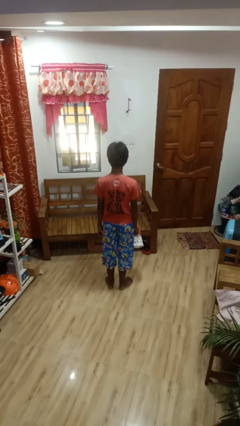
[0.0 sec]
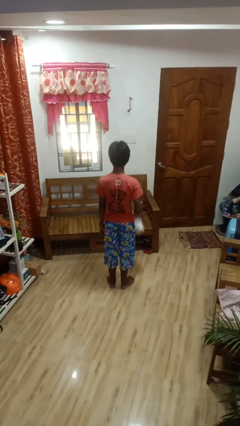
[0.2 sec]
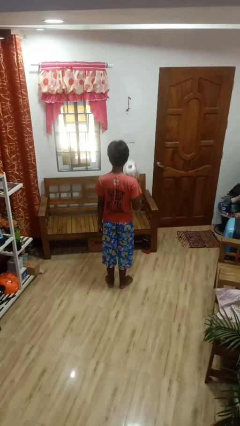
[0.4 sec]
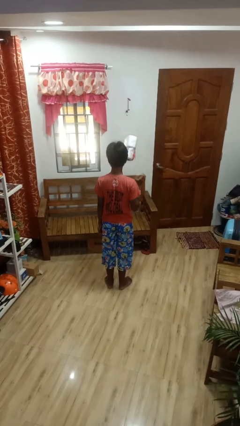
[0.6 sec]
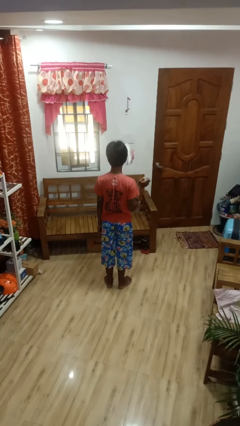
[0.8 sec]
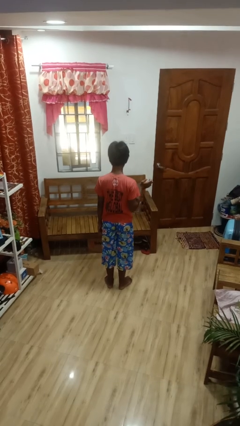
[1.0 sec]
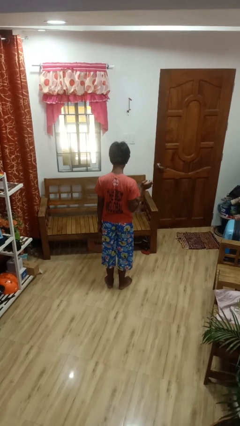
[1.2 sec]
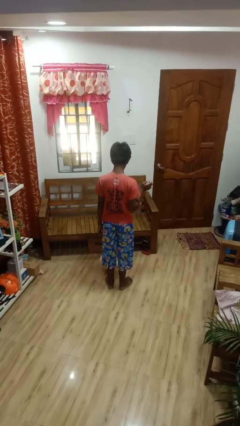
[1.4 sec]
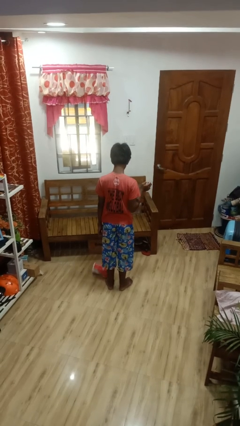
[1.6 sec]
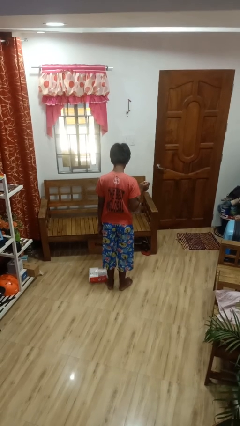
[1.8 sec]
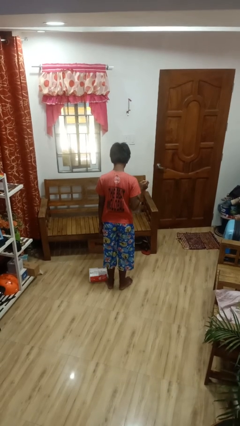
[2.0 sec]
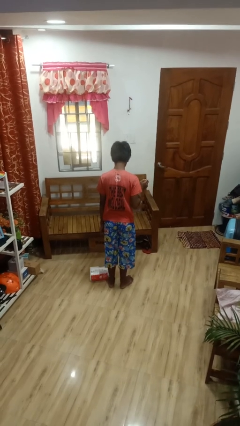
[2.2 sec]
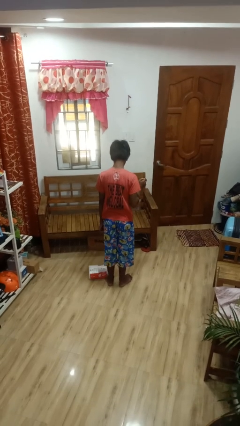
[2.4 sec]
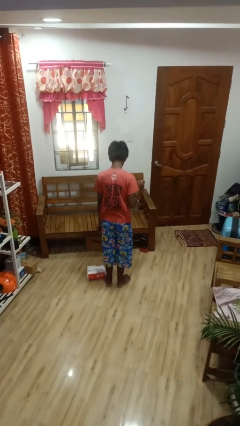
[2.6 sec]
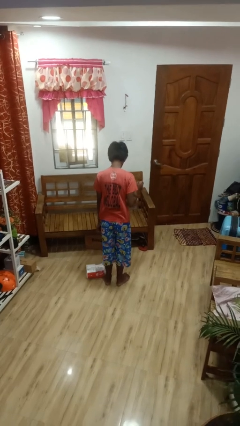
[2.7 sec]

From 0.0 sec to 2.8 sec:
person throws object into air

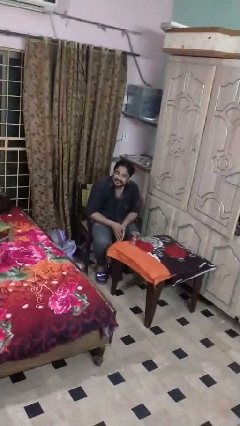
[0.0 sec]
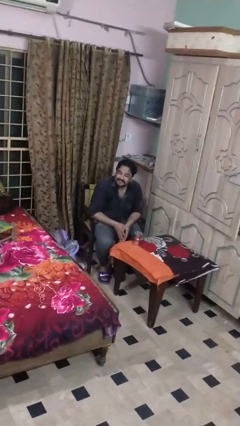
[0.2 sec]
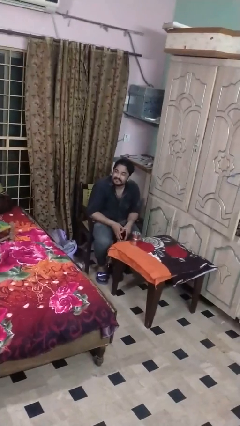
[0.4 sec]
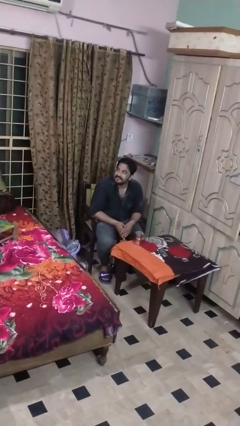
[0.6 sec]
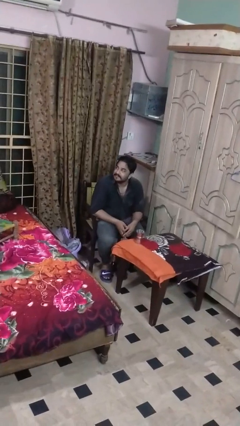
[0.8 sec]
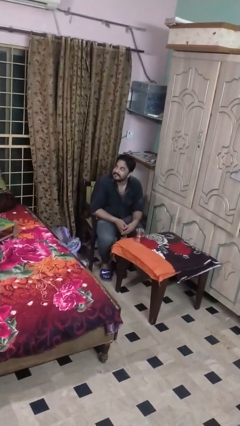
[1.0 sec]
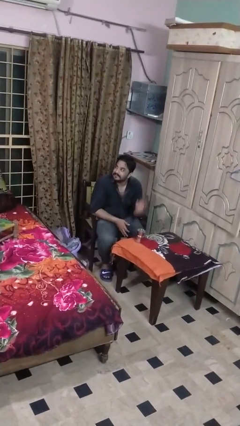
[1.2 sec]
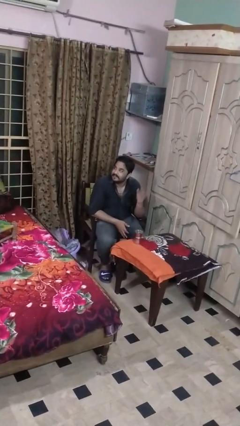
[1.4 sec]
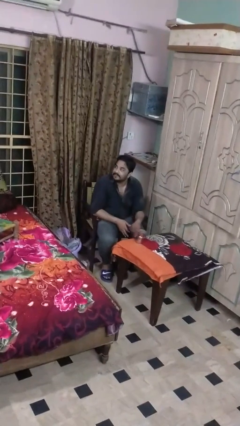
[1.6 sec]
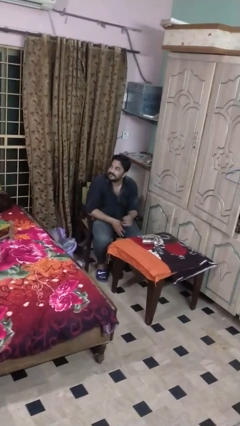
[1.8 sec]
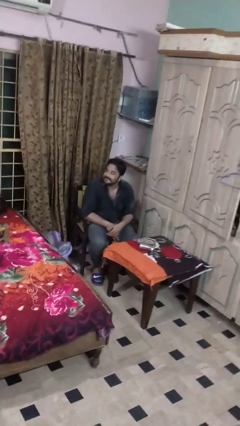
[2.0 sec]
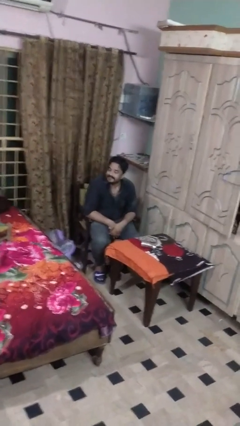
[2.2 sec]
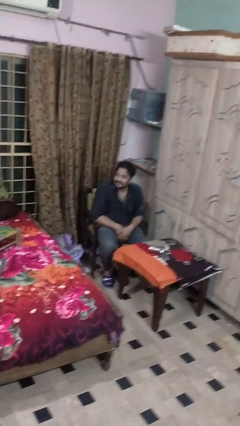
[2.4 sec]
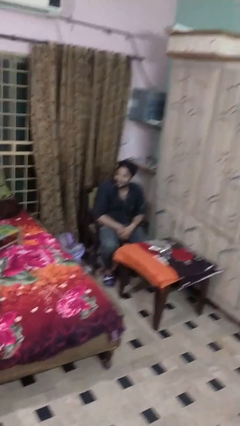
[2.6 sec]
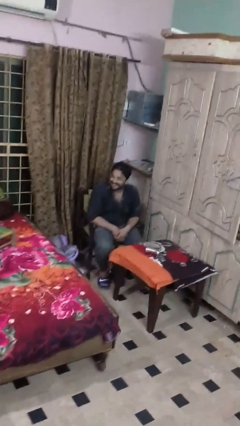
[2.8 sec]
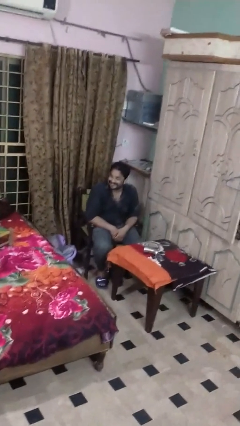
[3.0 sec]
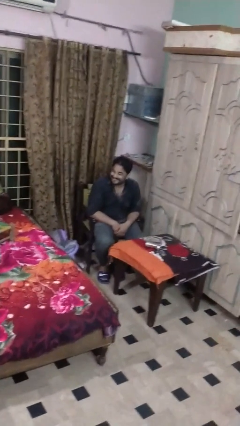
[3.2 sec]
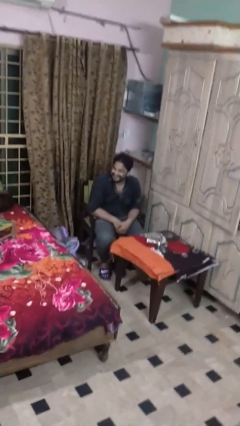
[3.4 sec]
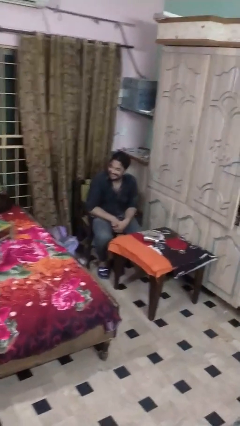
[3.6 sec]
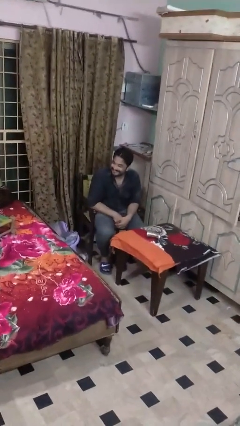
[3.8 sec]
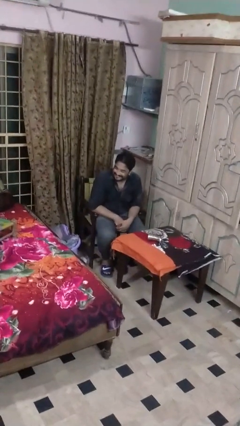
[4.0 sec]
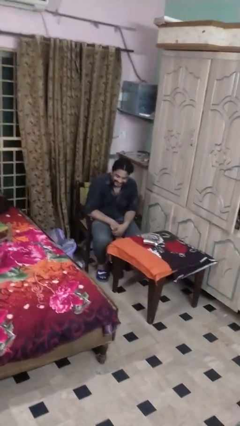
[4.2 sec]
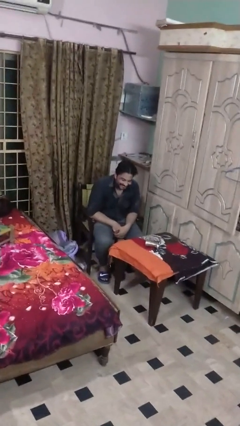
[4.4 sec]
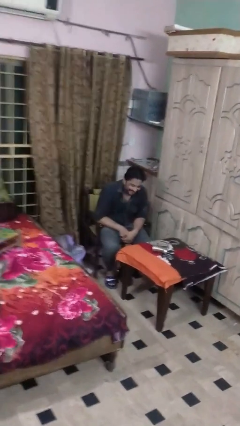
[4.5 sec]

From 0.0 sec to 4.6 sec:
person knocks over glass

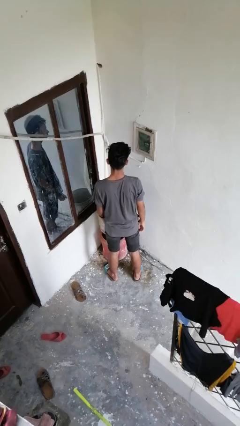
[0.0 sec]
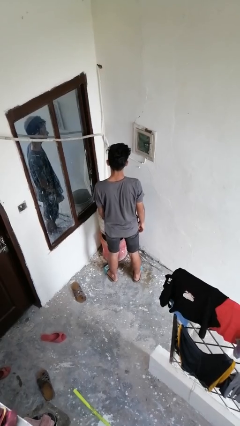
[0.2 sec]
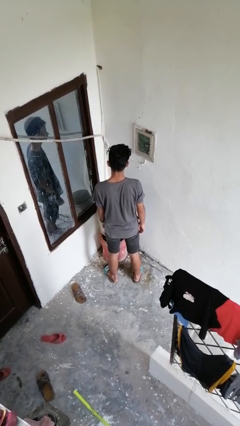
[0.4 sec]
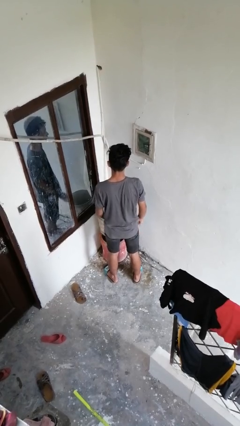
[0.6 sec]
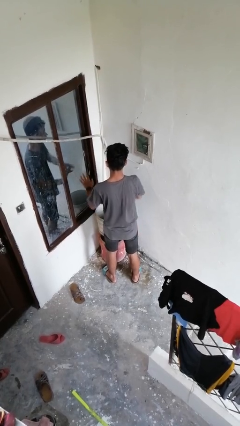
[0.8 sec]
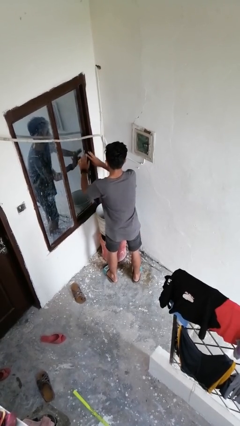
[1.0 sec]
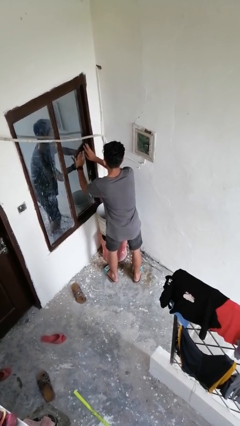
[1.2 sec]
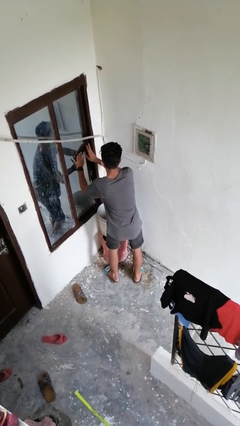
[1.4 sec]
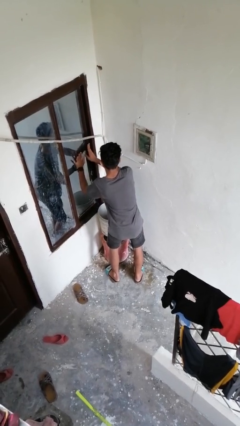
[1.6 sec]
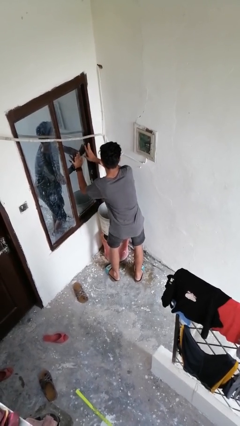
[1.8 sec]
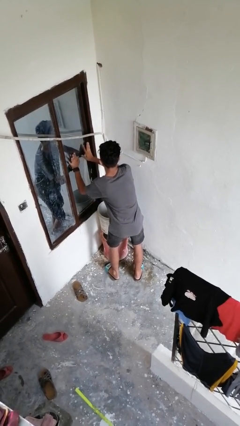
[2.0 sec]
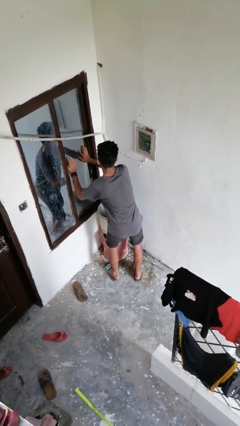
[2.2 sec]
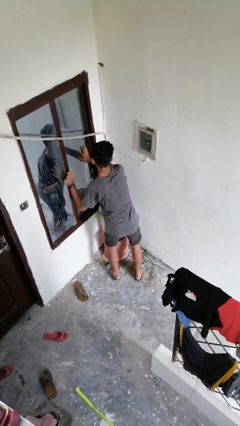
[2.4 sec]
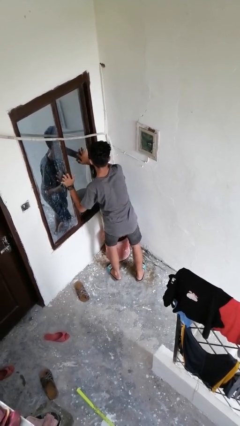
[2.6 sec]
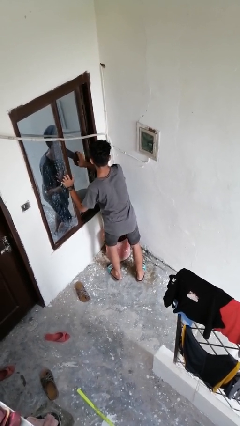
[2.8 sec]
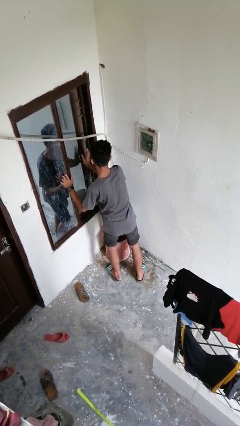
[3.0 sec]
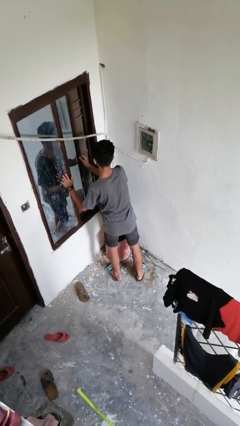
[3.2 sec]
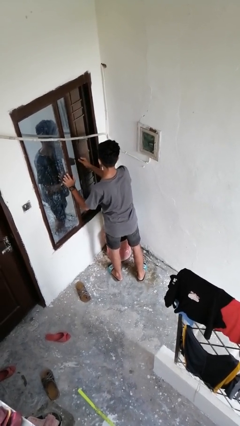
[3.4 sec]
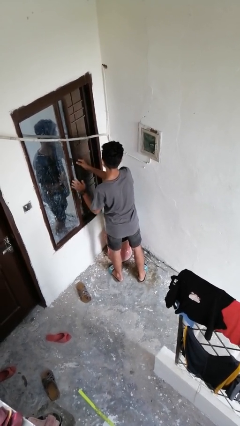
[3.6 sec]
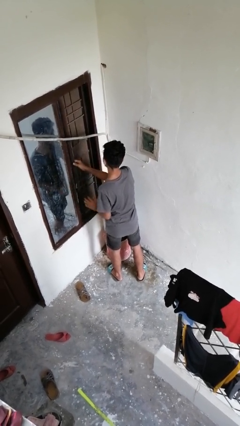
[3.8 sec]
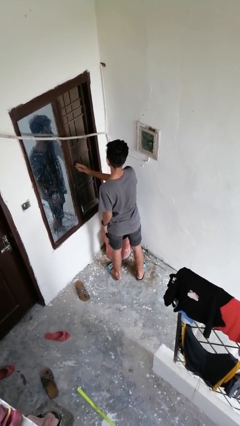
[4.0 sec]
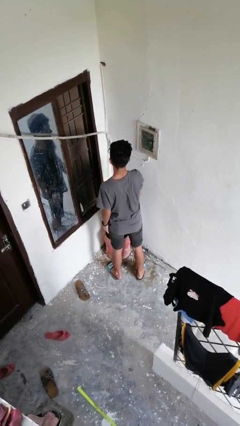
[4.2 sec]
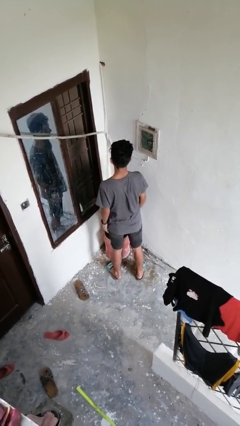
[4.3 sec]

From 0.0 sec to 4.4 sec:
person opens home window

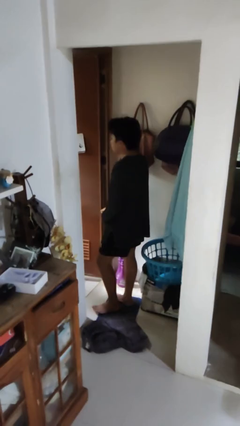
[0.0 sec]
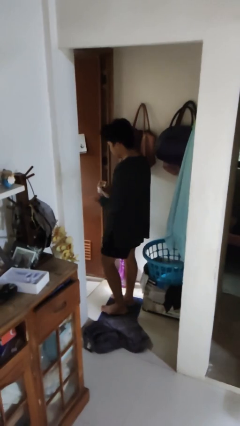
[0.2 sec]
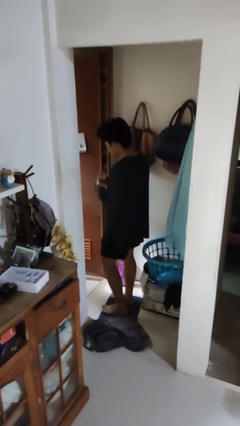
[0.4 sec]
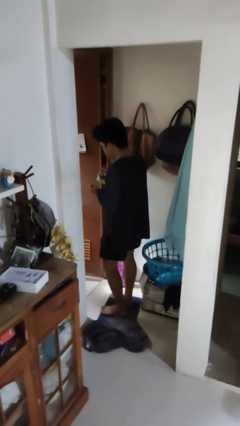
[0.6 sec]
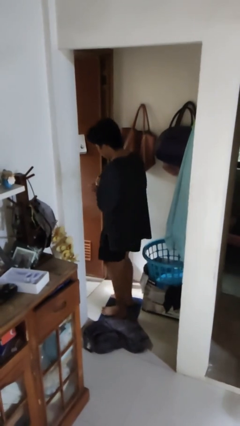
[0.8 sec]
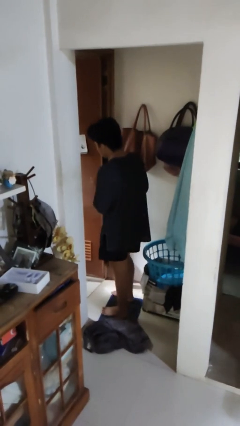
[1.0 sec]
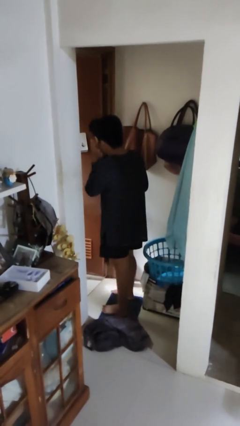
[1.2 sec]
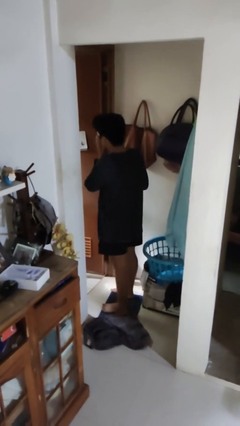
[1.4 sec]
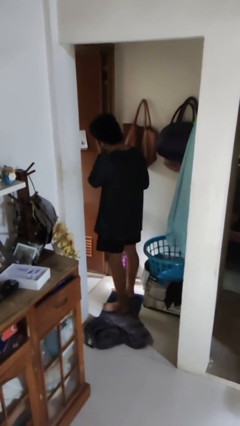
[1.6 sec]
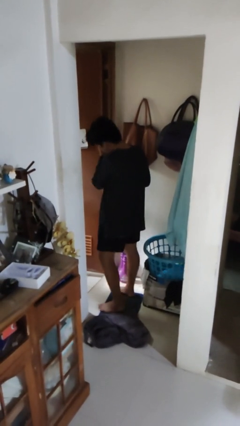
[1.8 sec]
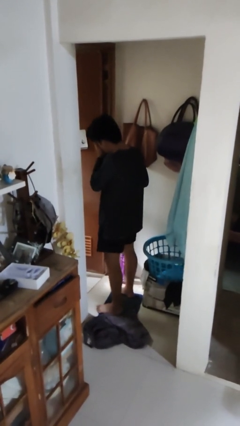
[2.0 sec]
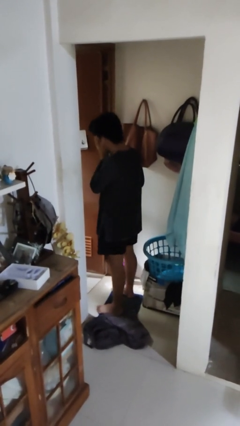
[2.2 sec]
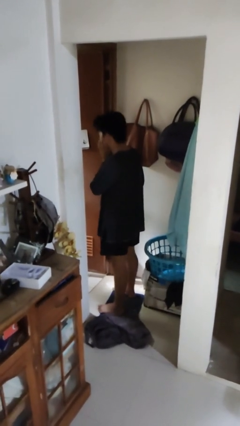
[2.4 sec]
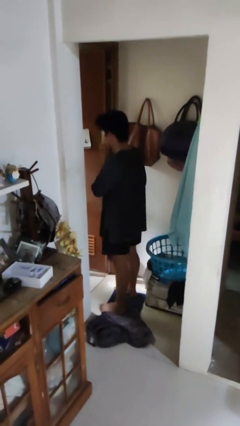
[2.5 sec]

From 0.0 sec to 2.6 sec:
person applies shaving cream

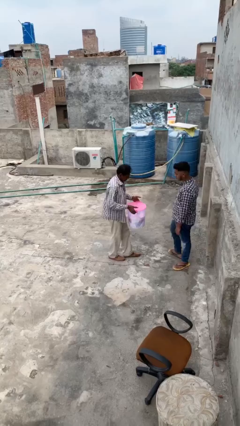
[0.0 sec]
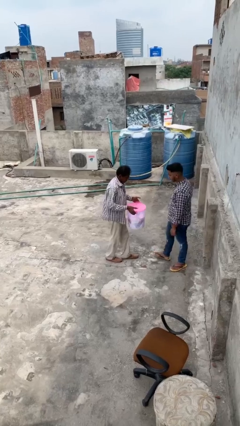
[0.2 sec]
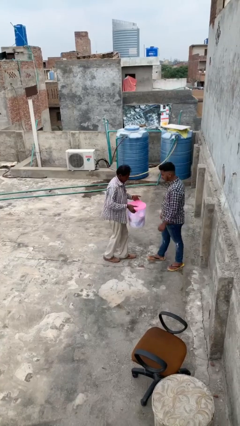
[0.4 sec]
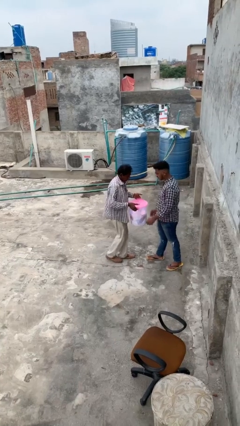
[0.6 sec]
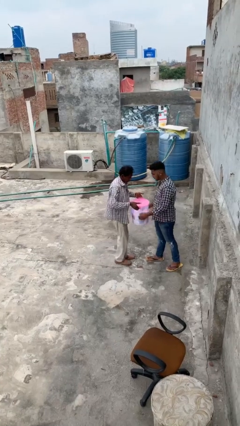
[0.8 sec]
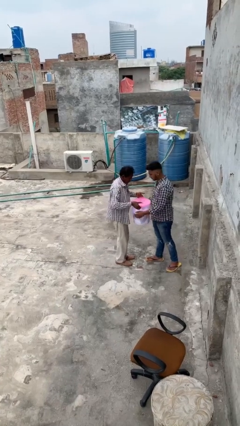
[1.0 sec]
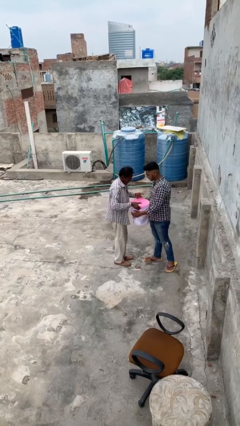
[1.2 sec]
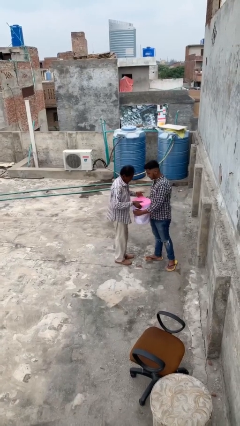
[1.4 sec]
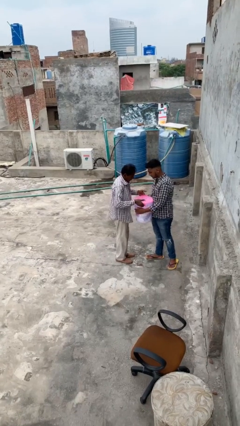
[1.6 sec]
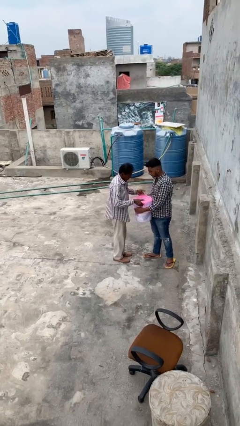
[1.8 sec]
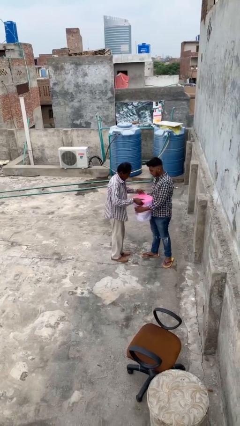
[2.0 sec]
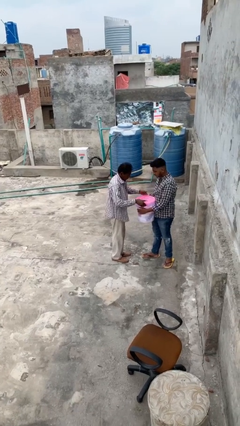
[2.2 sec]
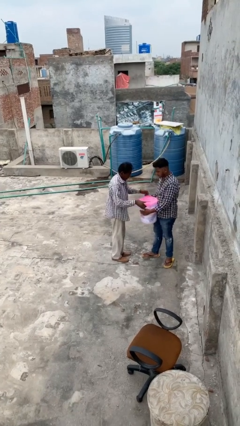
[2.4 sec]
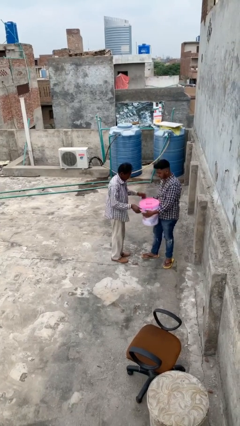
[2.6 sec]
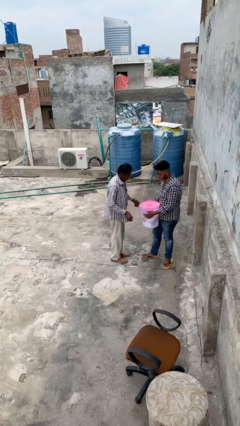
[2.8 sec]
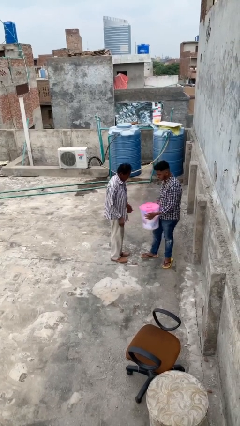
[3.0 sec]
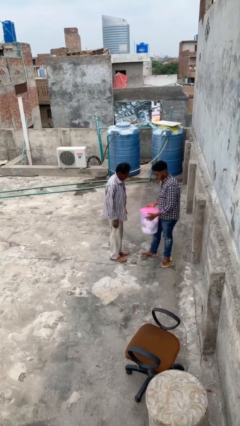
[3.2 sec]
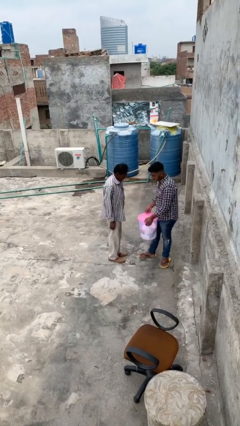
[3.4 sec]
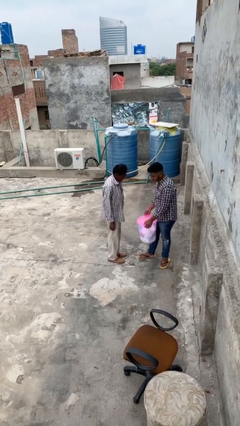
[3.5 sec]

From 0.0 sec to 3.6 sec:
person transfers object to person
